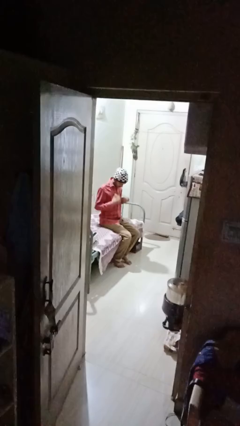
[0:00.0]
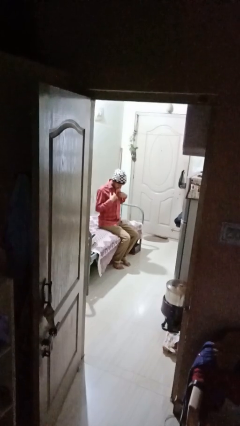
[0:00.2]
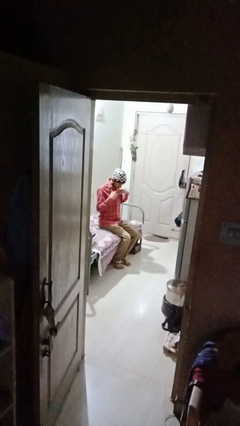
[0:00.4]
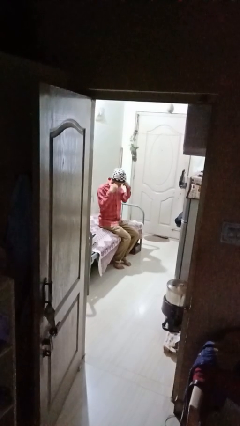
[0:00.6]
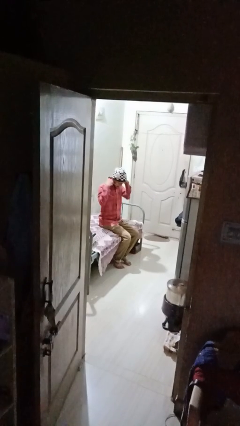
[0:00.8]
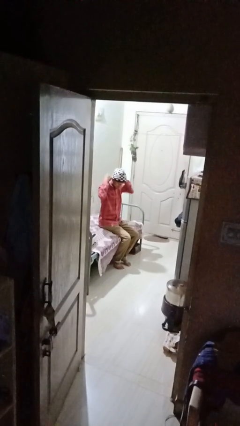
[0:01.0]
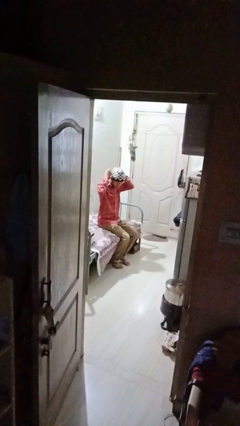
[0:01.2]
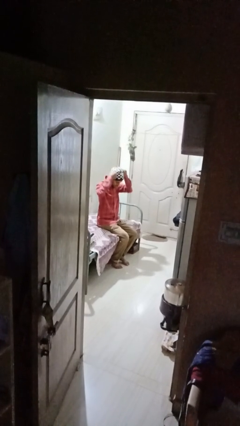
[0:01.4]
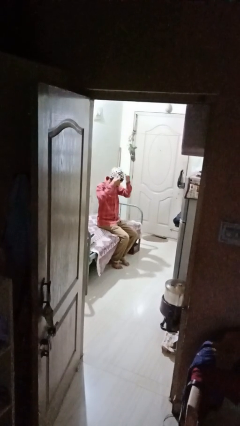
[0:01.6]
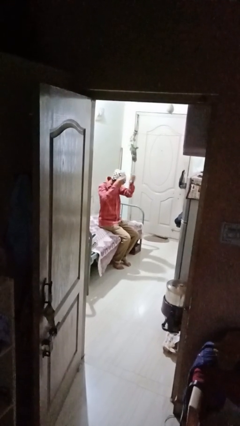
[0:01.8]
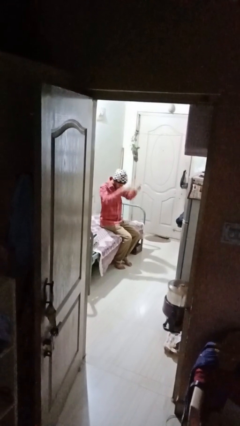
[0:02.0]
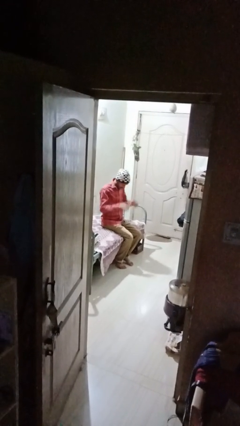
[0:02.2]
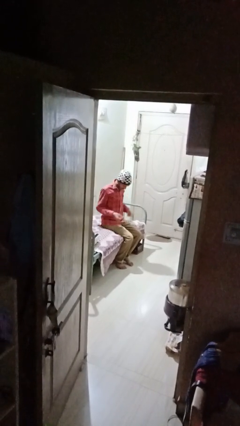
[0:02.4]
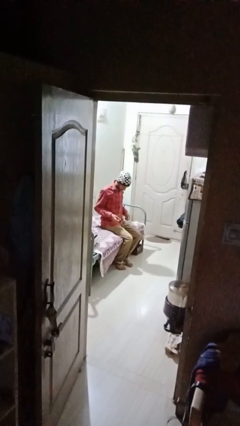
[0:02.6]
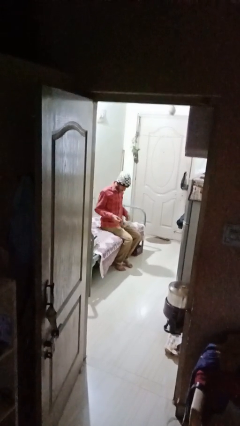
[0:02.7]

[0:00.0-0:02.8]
person takes off necklace

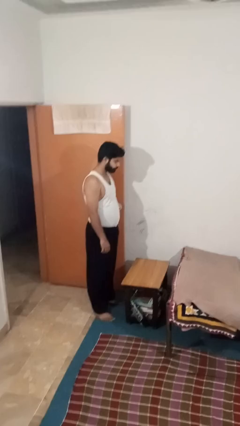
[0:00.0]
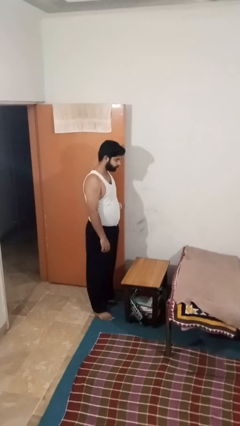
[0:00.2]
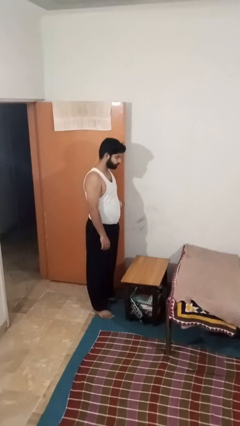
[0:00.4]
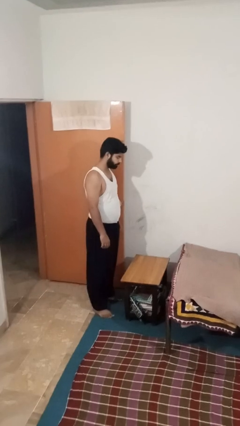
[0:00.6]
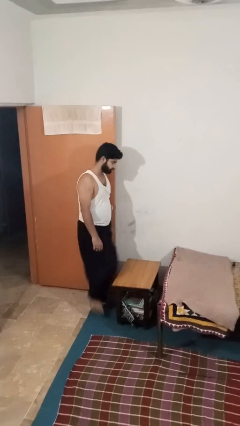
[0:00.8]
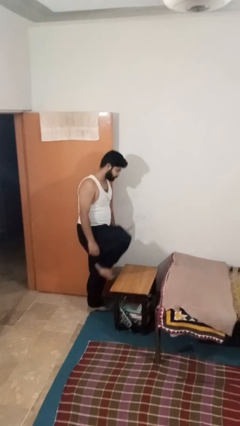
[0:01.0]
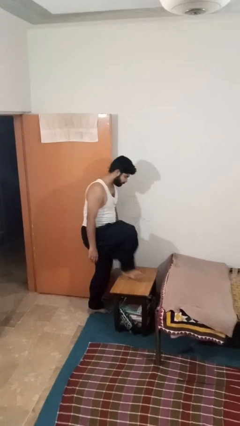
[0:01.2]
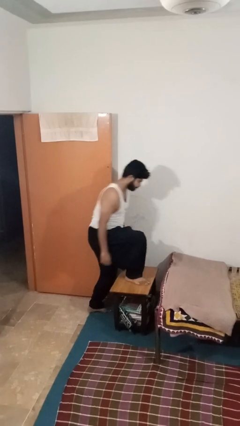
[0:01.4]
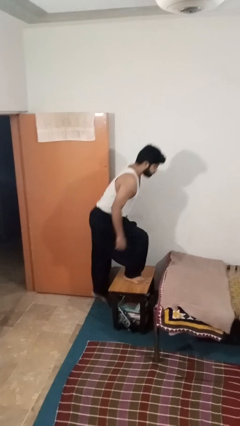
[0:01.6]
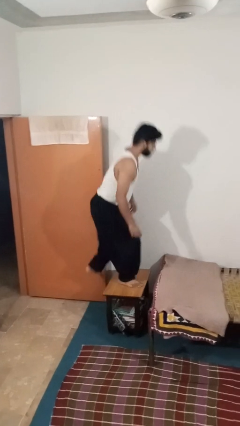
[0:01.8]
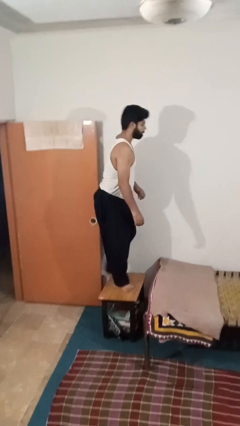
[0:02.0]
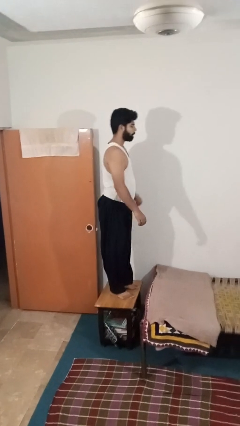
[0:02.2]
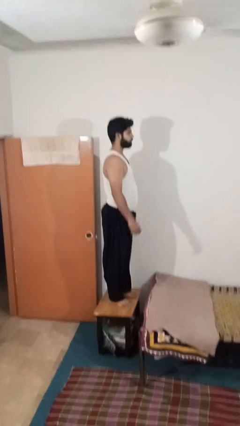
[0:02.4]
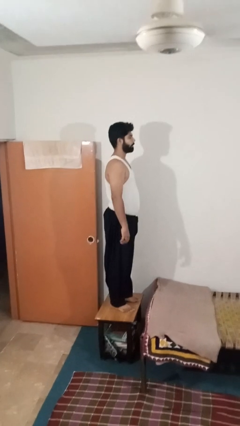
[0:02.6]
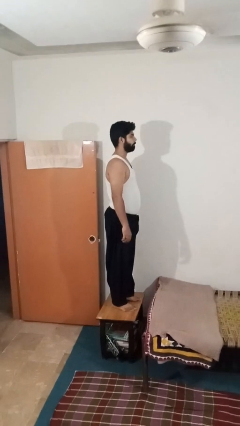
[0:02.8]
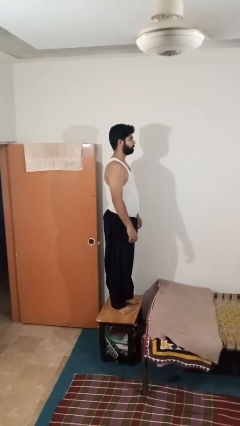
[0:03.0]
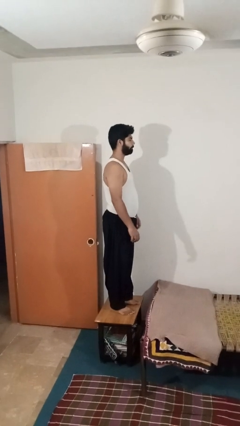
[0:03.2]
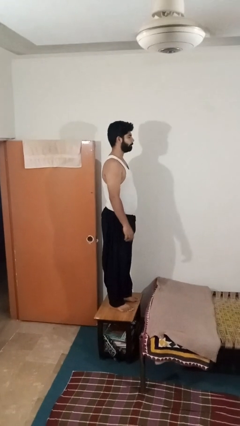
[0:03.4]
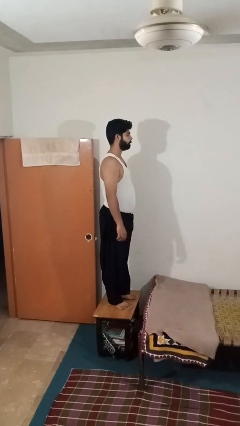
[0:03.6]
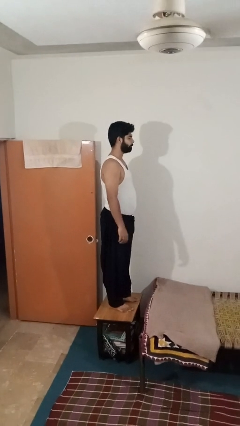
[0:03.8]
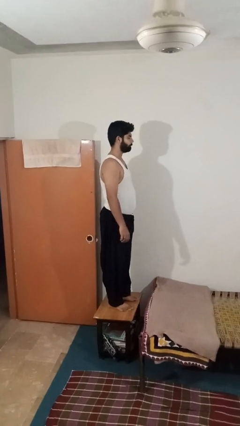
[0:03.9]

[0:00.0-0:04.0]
person climbs on table

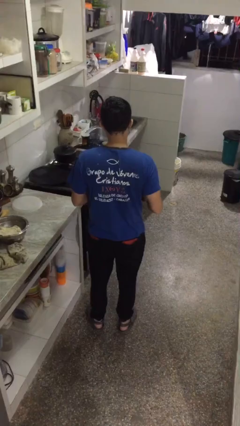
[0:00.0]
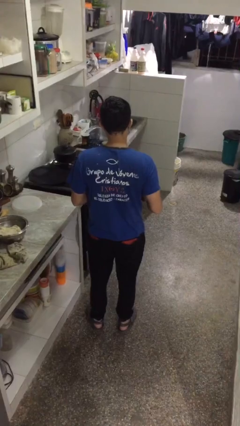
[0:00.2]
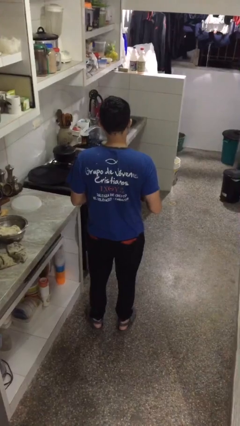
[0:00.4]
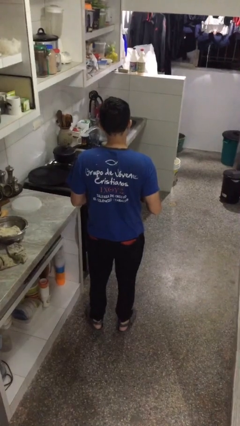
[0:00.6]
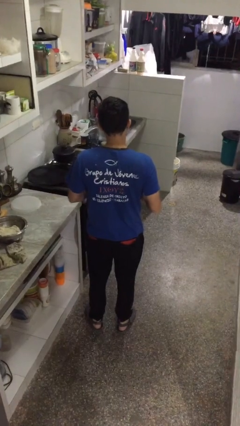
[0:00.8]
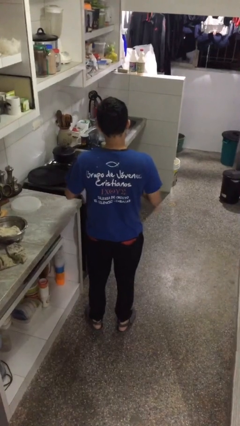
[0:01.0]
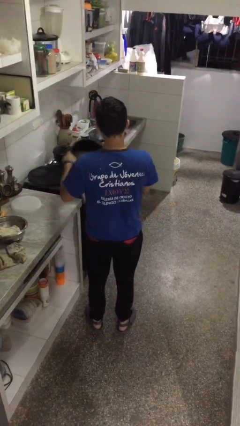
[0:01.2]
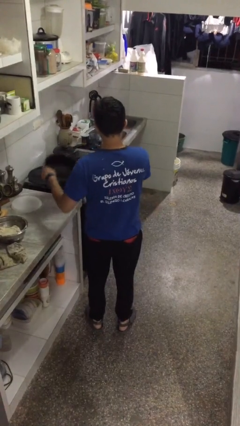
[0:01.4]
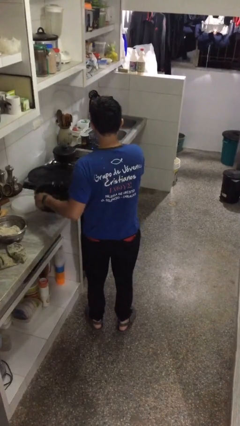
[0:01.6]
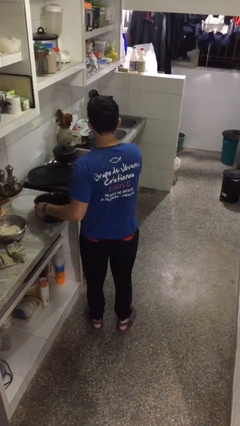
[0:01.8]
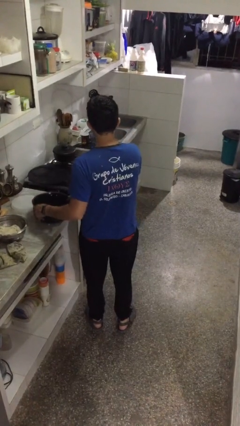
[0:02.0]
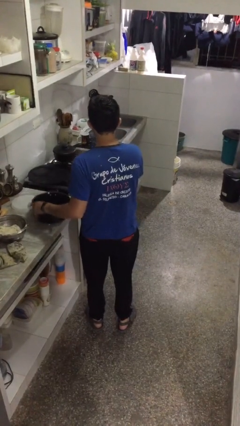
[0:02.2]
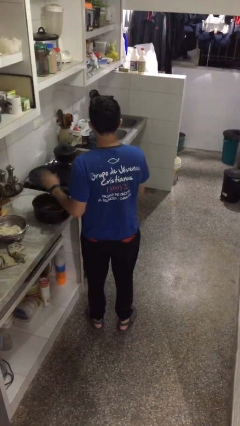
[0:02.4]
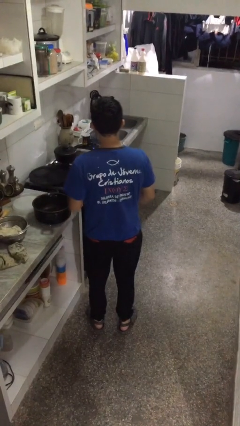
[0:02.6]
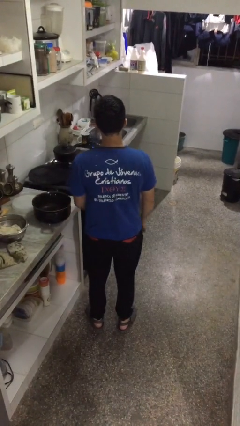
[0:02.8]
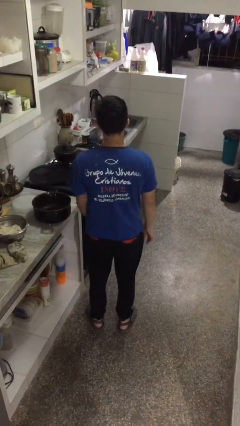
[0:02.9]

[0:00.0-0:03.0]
person puts down object on countertop

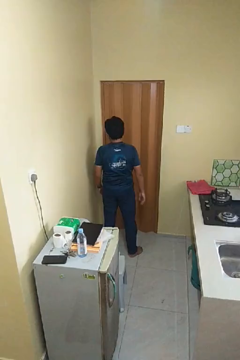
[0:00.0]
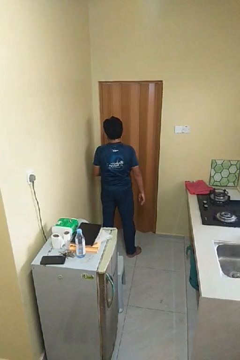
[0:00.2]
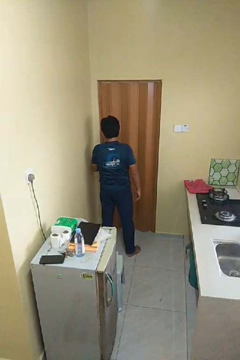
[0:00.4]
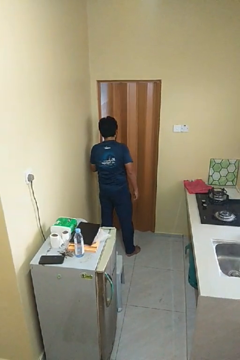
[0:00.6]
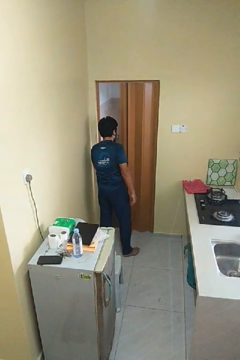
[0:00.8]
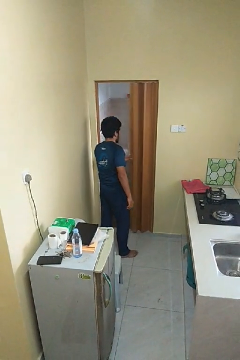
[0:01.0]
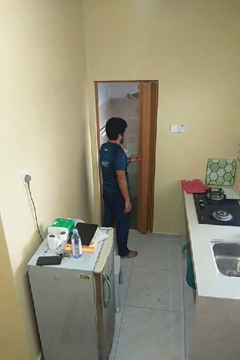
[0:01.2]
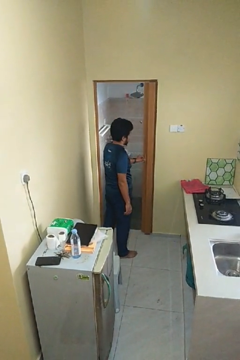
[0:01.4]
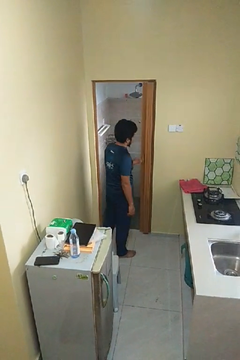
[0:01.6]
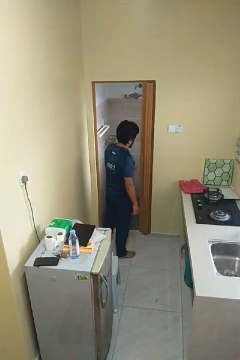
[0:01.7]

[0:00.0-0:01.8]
person opens sliding door

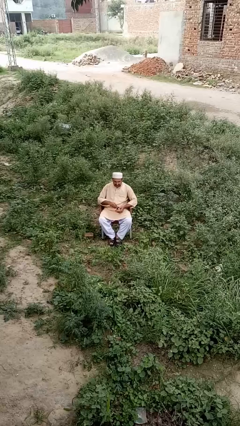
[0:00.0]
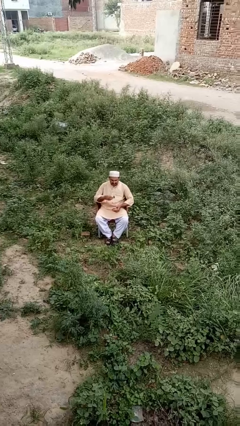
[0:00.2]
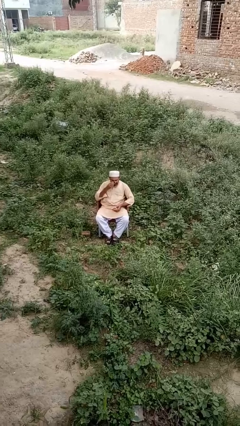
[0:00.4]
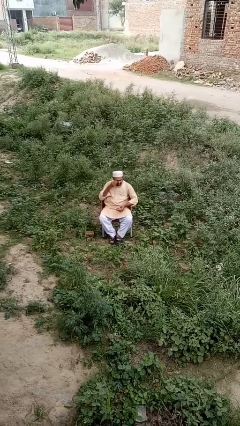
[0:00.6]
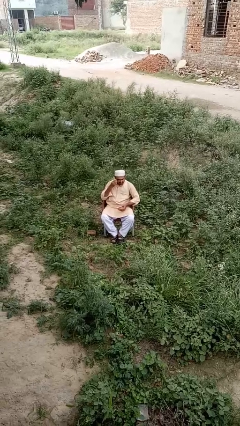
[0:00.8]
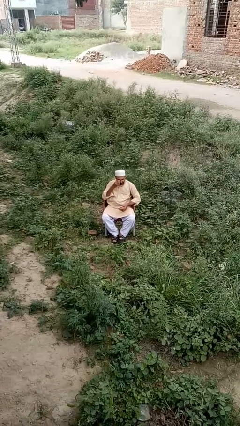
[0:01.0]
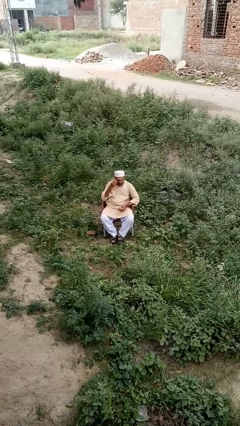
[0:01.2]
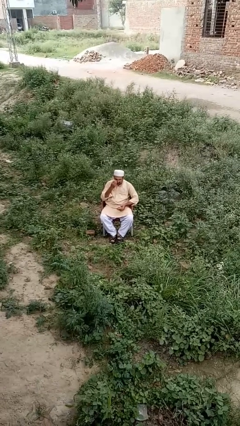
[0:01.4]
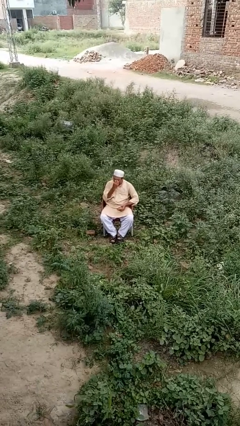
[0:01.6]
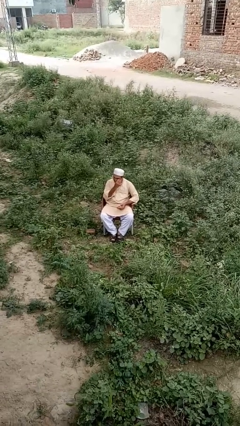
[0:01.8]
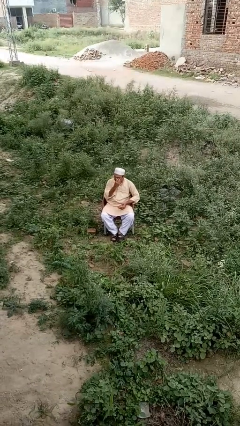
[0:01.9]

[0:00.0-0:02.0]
person shades eyes

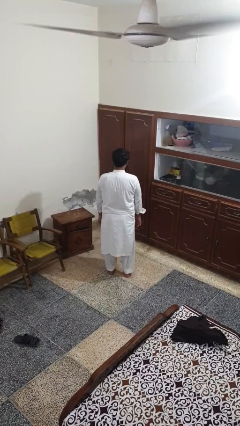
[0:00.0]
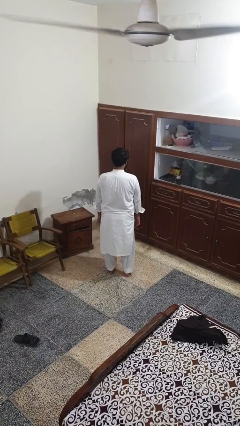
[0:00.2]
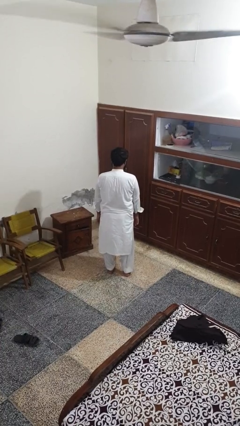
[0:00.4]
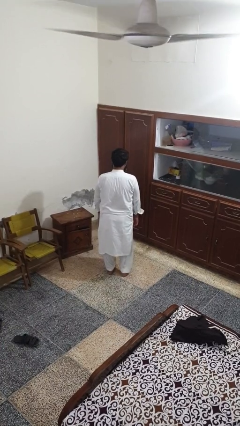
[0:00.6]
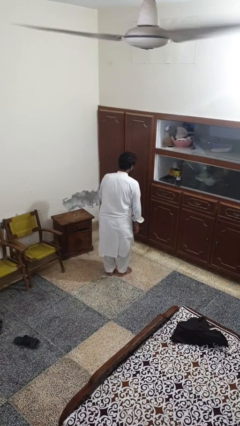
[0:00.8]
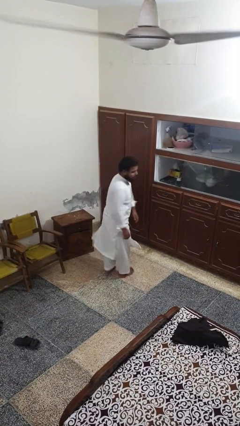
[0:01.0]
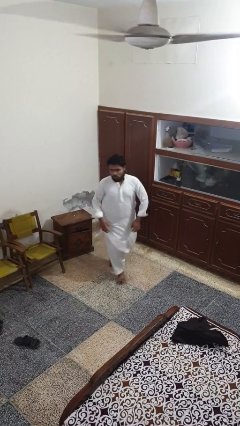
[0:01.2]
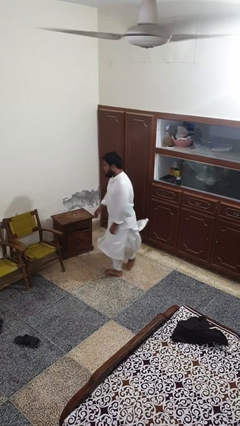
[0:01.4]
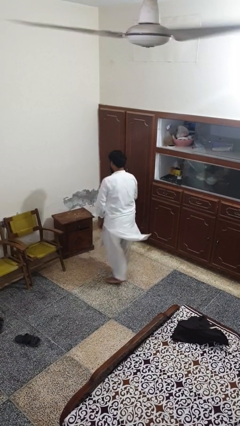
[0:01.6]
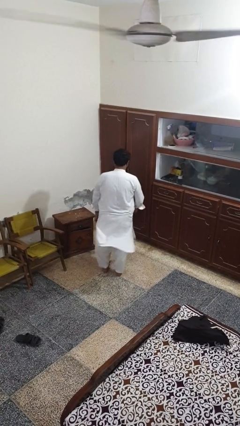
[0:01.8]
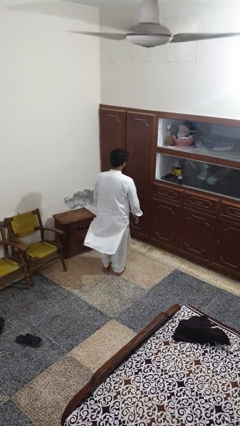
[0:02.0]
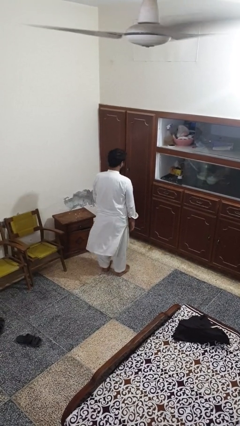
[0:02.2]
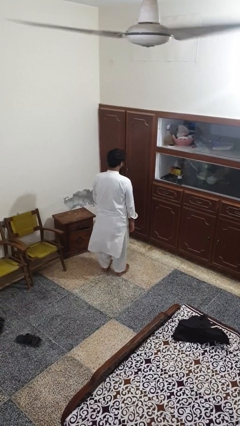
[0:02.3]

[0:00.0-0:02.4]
person twirls

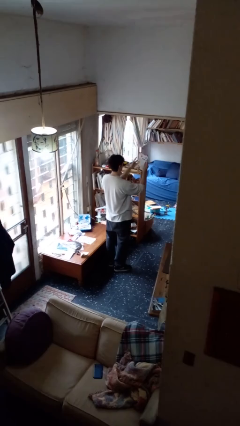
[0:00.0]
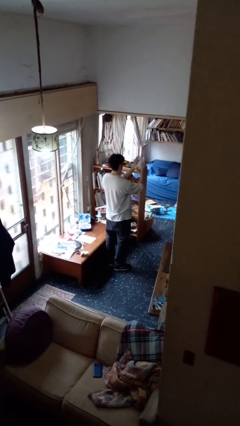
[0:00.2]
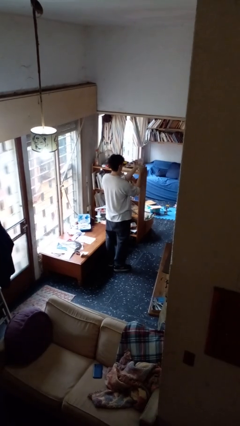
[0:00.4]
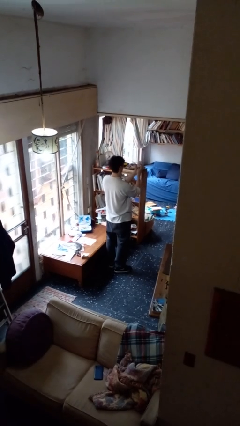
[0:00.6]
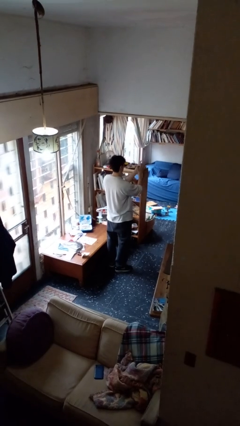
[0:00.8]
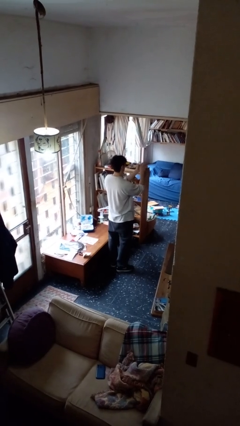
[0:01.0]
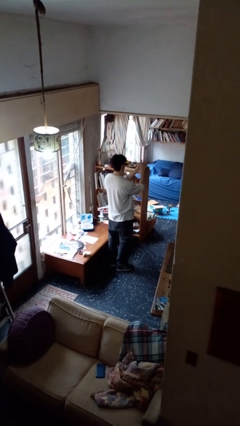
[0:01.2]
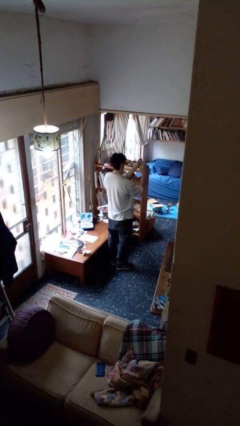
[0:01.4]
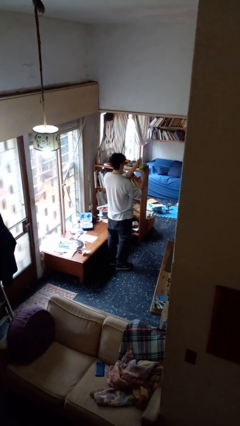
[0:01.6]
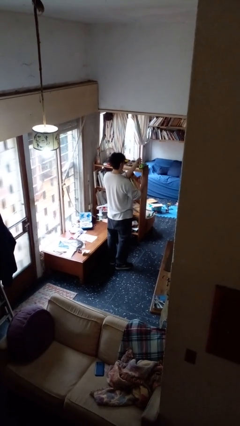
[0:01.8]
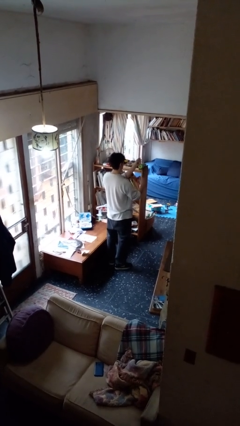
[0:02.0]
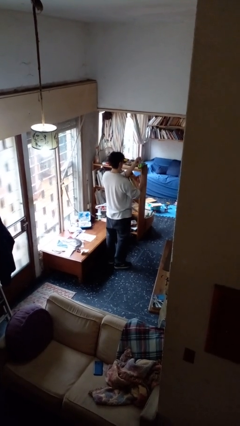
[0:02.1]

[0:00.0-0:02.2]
person crumples paper
